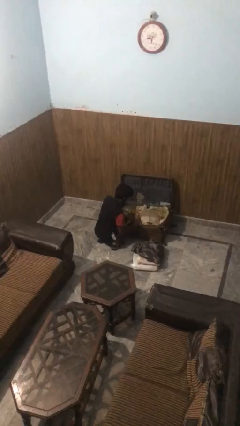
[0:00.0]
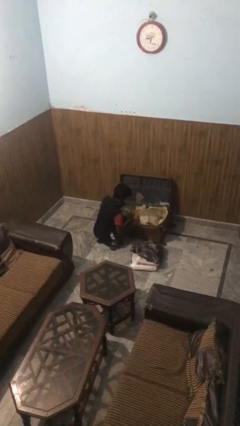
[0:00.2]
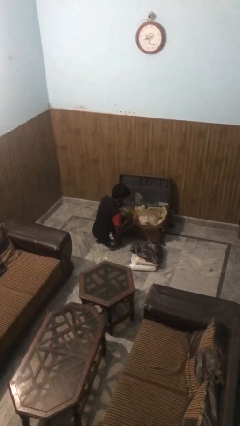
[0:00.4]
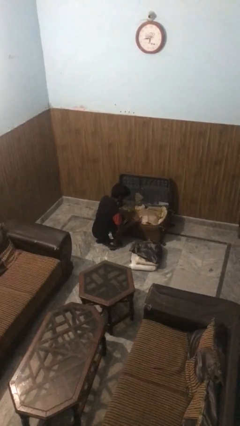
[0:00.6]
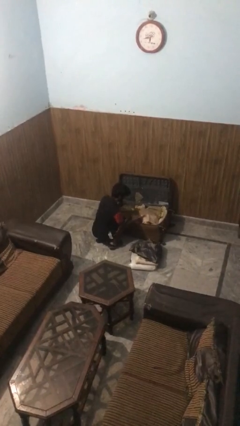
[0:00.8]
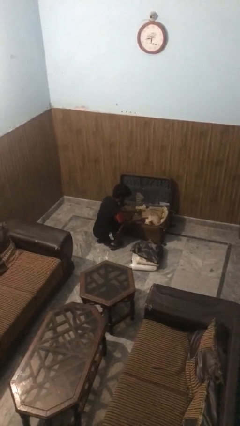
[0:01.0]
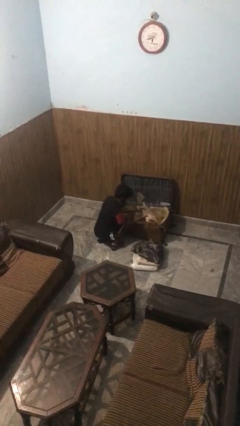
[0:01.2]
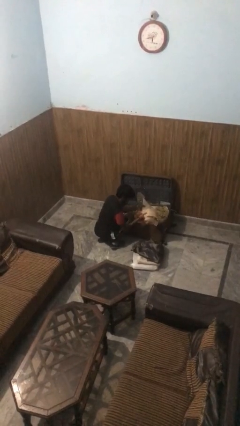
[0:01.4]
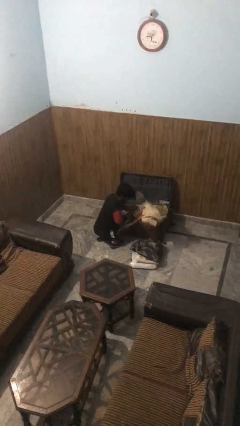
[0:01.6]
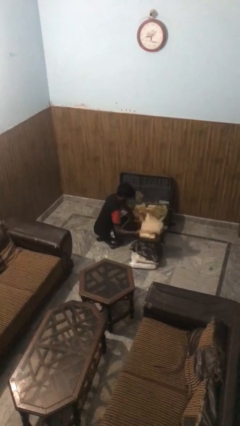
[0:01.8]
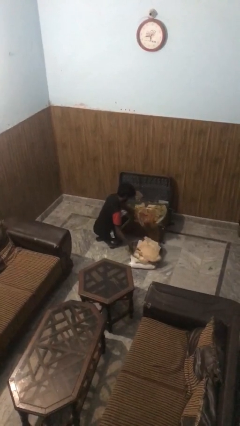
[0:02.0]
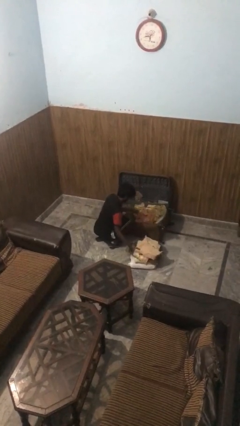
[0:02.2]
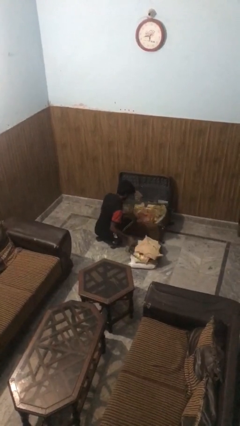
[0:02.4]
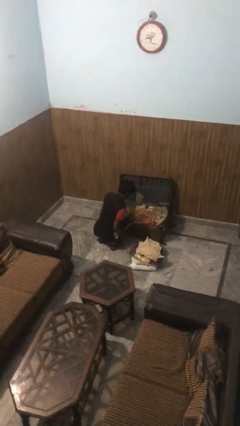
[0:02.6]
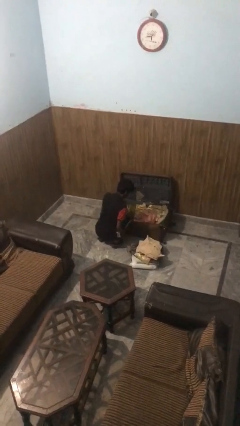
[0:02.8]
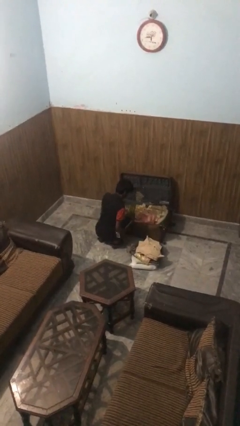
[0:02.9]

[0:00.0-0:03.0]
person unloads clothes from suitcase

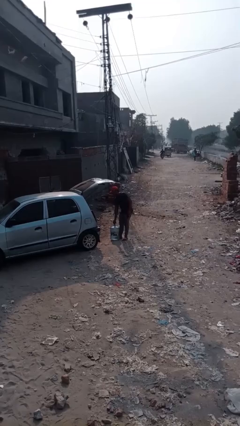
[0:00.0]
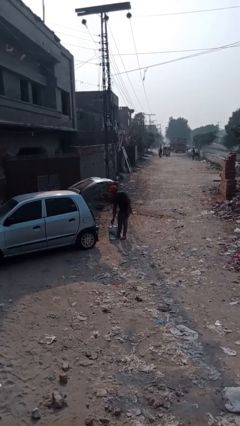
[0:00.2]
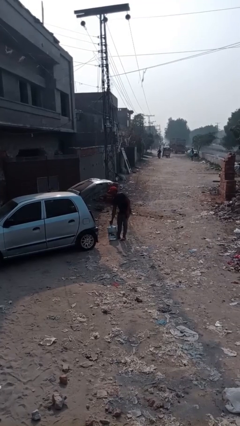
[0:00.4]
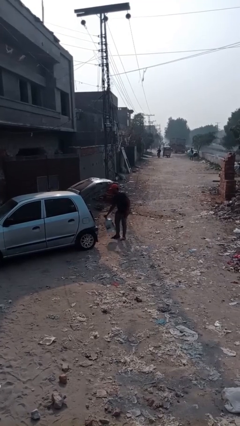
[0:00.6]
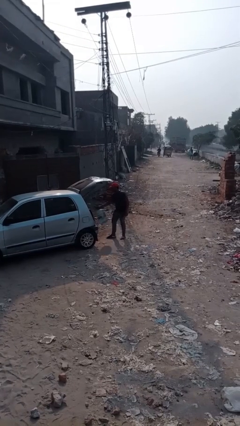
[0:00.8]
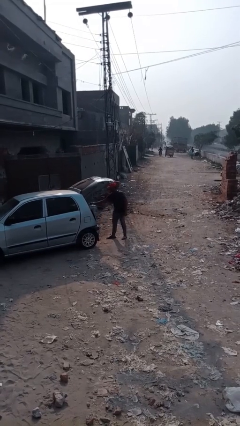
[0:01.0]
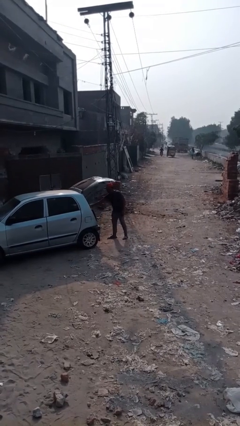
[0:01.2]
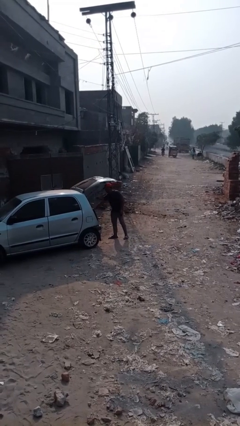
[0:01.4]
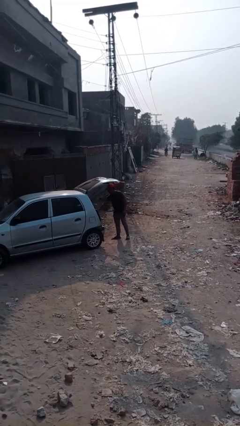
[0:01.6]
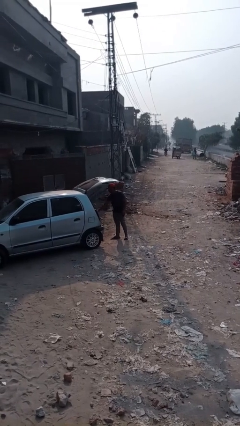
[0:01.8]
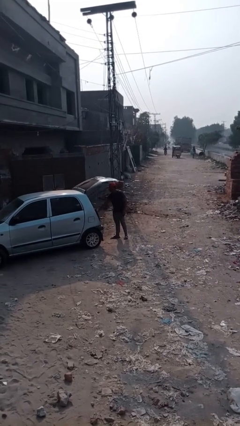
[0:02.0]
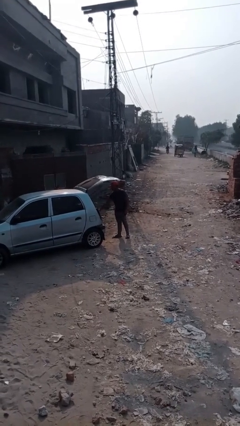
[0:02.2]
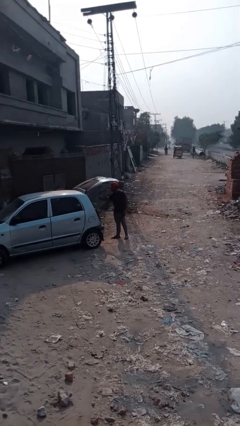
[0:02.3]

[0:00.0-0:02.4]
person loads car

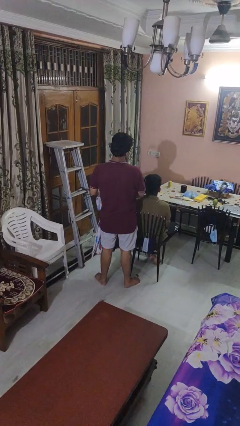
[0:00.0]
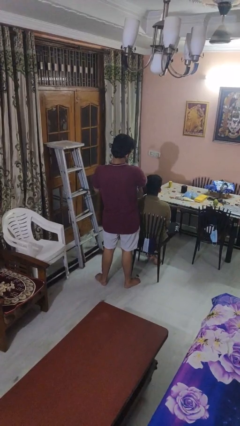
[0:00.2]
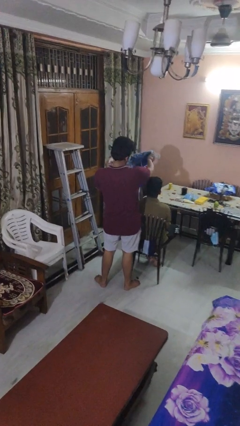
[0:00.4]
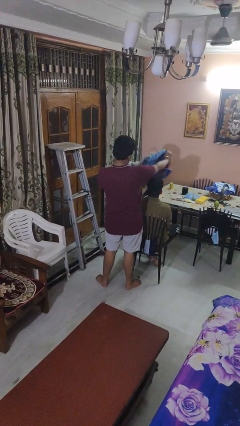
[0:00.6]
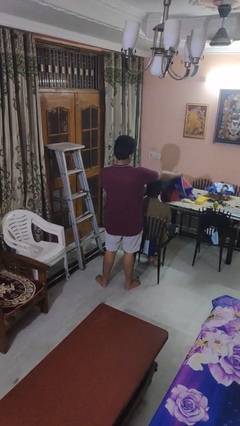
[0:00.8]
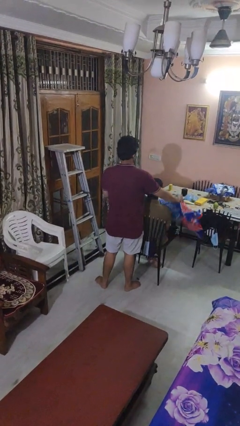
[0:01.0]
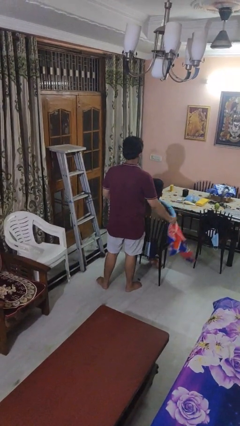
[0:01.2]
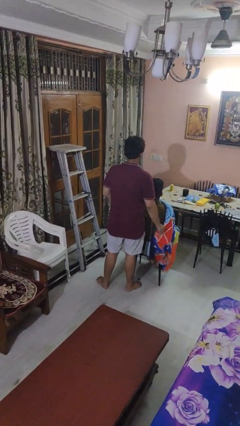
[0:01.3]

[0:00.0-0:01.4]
person covers friend with blanket

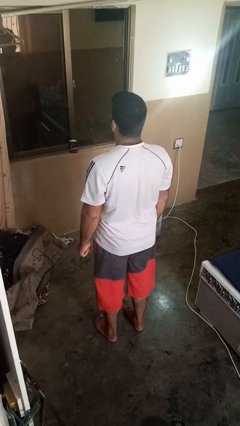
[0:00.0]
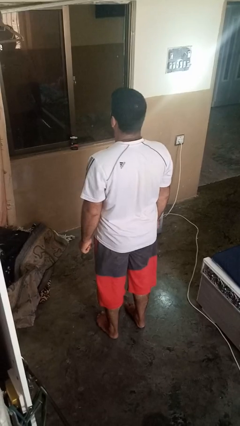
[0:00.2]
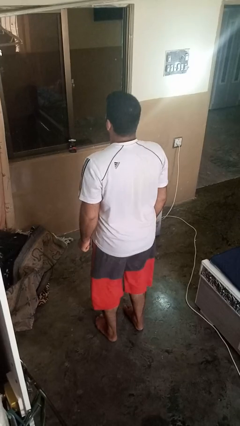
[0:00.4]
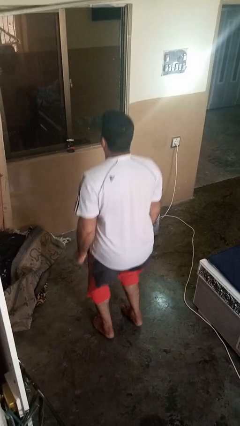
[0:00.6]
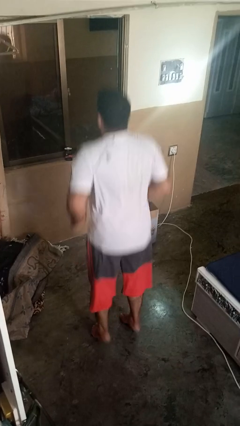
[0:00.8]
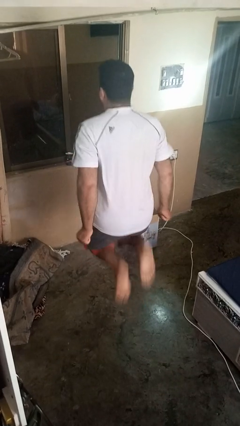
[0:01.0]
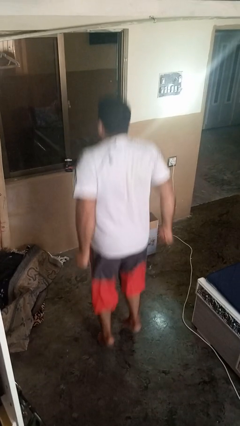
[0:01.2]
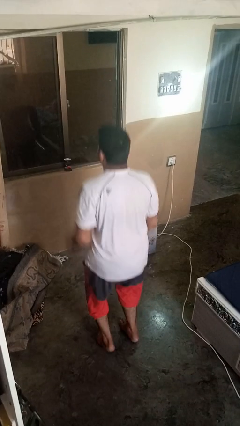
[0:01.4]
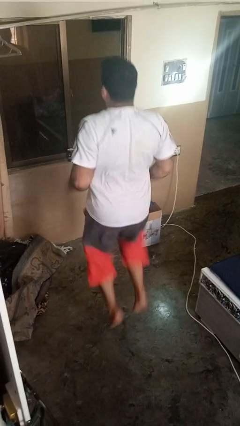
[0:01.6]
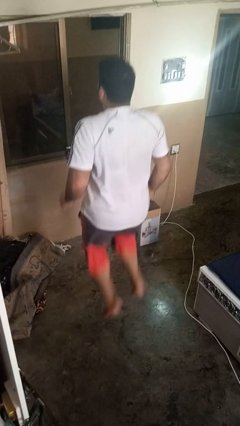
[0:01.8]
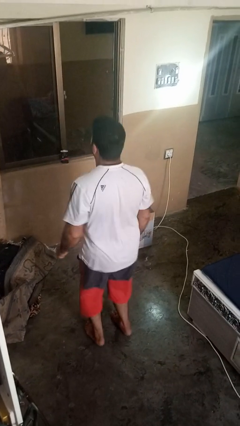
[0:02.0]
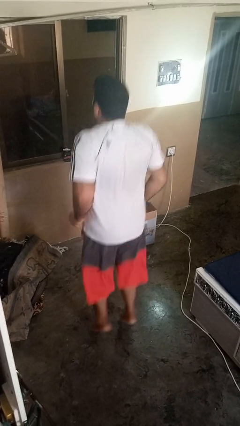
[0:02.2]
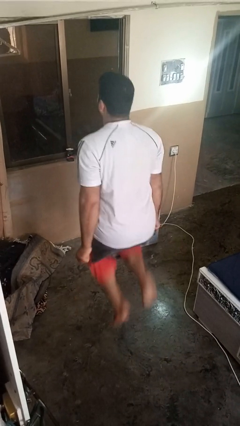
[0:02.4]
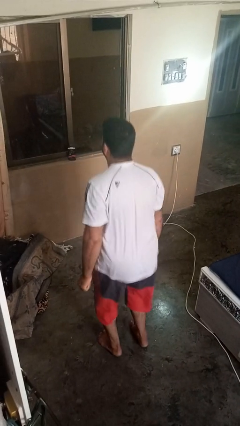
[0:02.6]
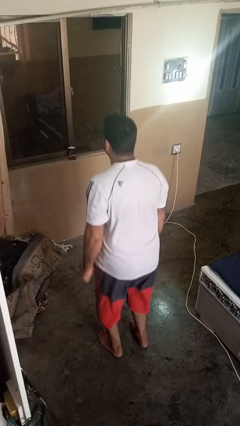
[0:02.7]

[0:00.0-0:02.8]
person jumps

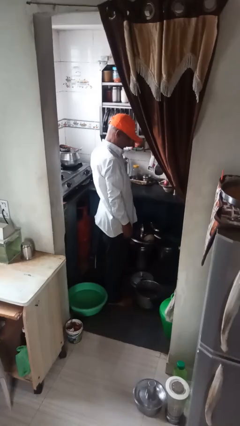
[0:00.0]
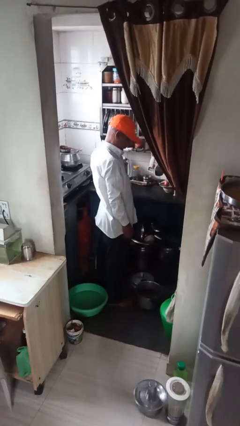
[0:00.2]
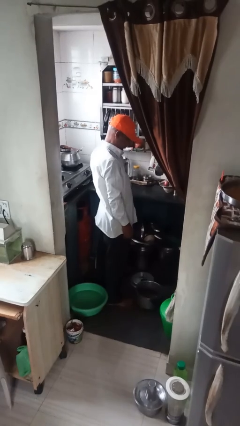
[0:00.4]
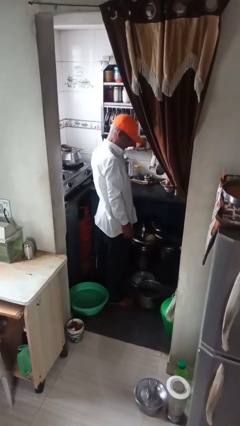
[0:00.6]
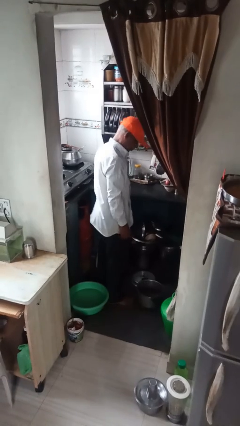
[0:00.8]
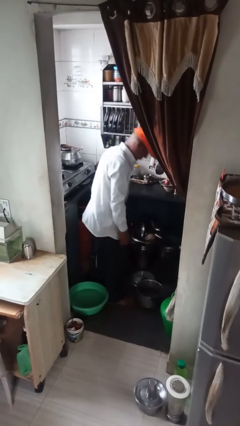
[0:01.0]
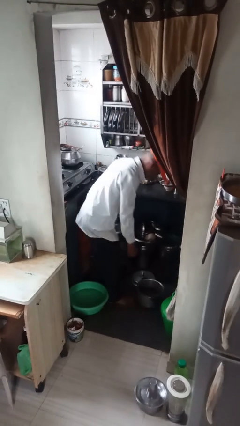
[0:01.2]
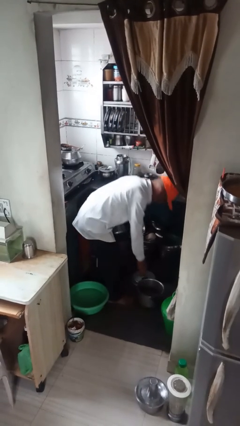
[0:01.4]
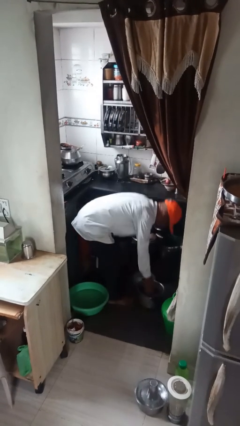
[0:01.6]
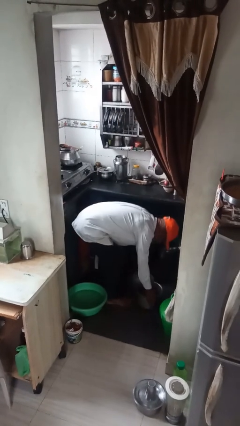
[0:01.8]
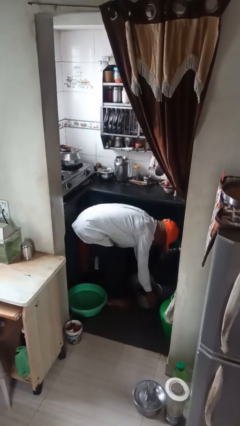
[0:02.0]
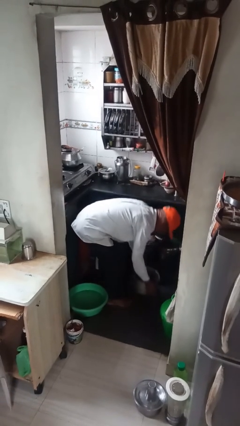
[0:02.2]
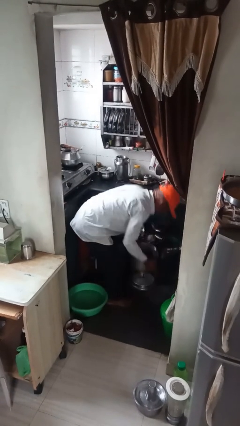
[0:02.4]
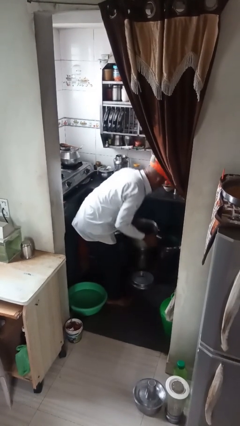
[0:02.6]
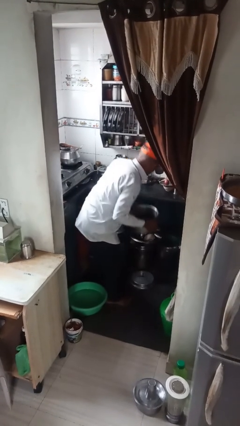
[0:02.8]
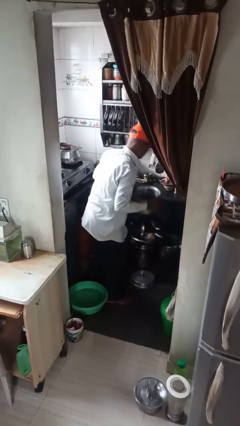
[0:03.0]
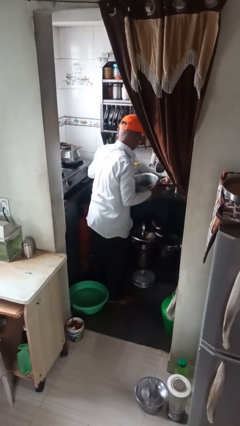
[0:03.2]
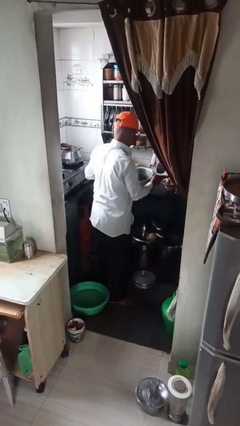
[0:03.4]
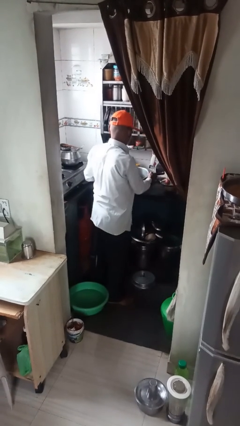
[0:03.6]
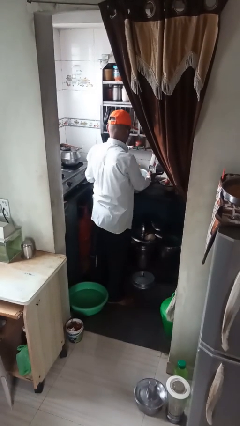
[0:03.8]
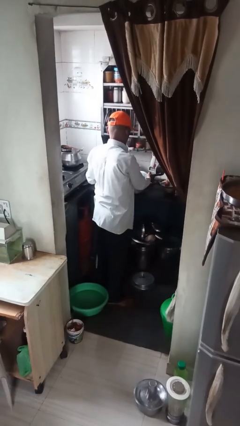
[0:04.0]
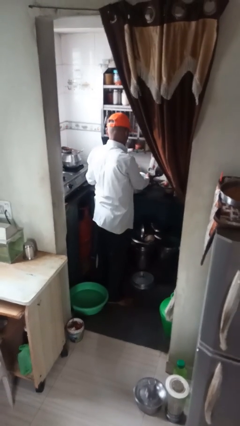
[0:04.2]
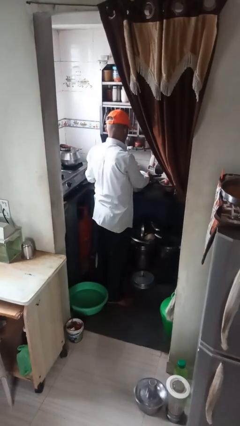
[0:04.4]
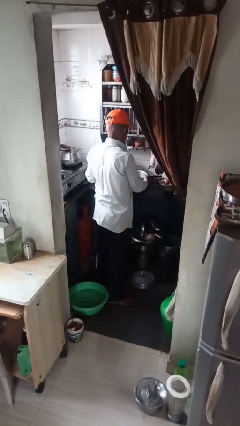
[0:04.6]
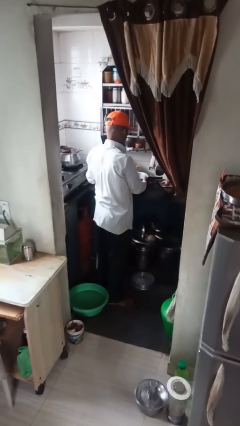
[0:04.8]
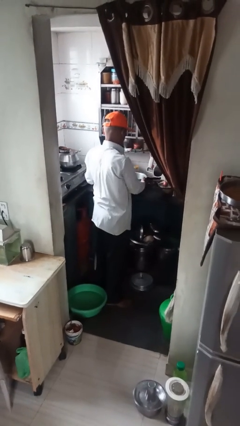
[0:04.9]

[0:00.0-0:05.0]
person picks up object from countertop

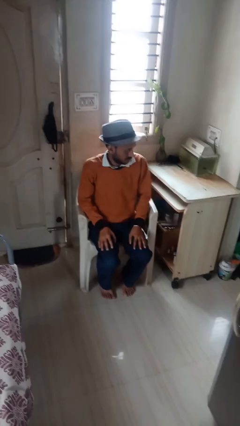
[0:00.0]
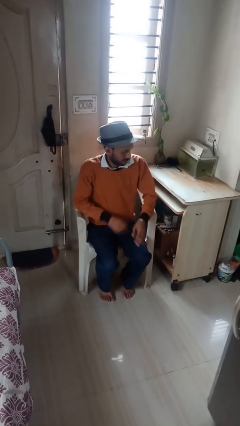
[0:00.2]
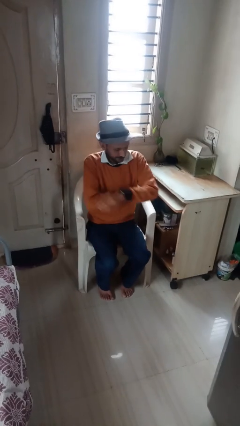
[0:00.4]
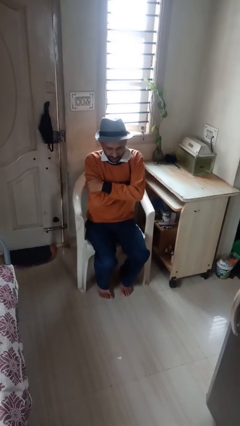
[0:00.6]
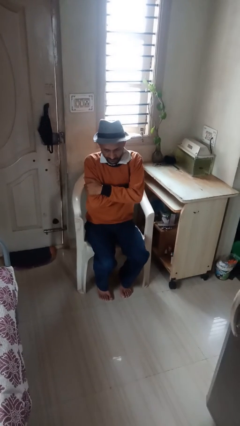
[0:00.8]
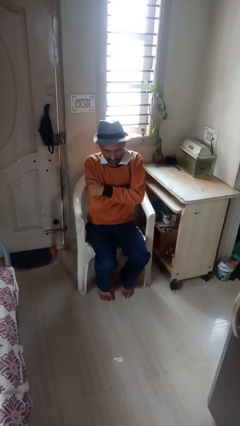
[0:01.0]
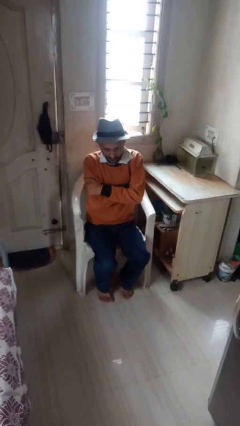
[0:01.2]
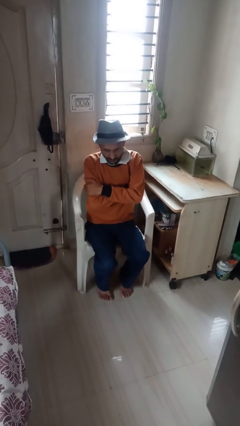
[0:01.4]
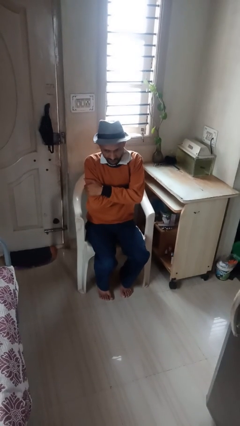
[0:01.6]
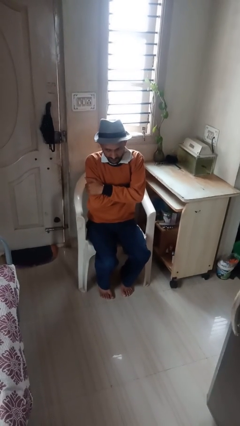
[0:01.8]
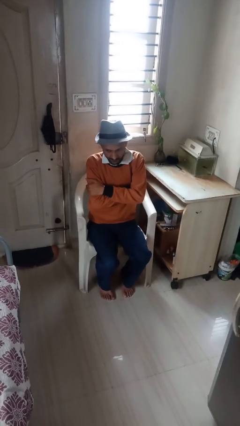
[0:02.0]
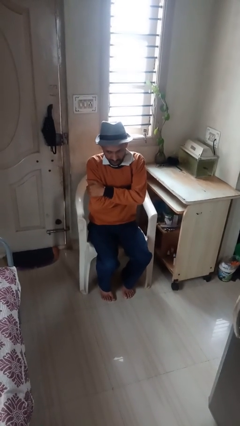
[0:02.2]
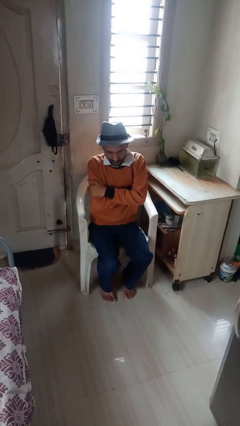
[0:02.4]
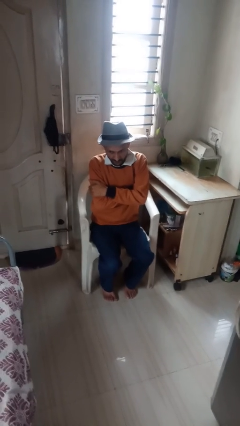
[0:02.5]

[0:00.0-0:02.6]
person crosses arms

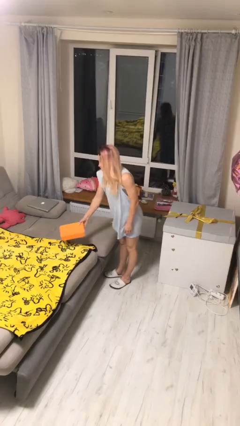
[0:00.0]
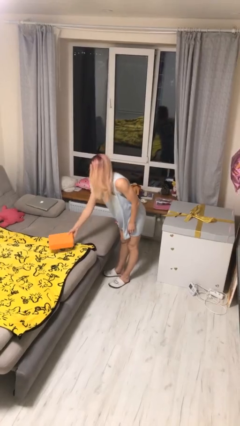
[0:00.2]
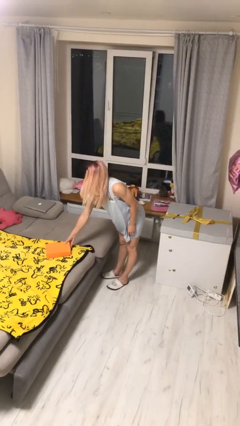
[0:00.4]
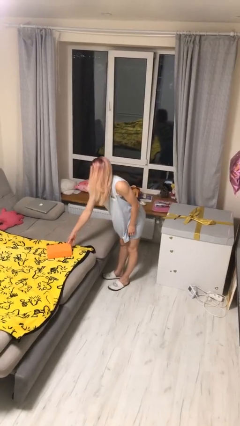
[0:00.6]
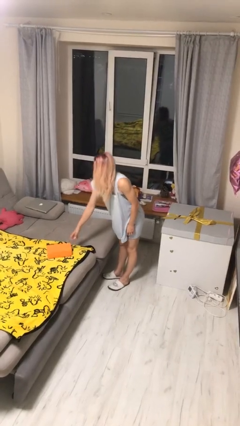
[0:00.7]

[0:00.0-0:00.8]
person puts down object on bed
